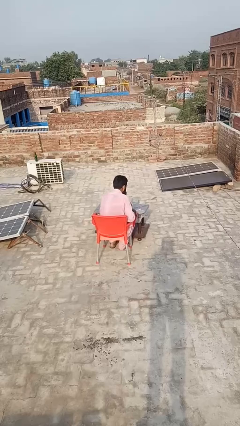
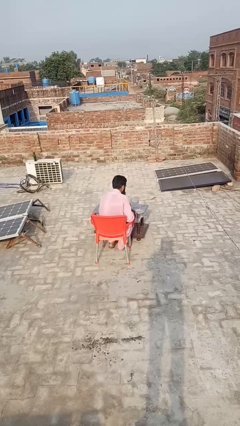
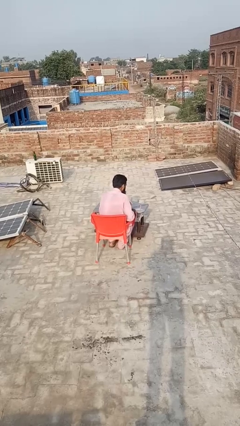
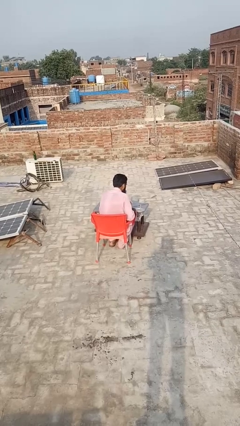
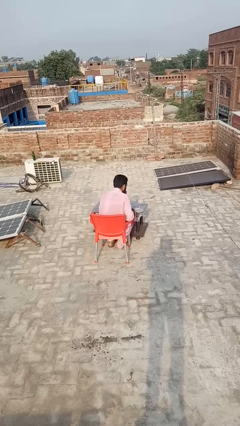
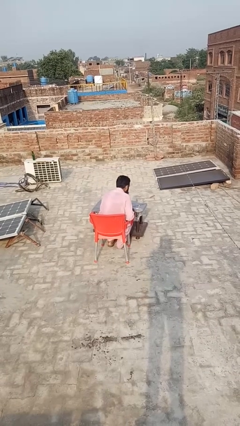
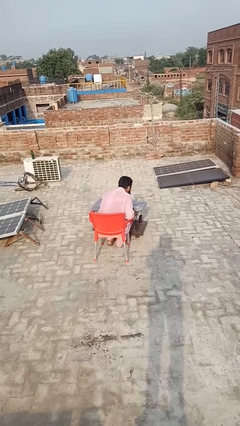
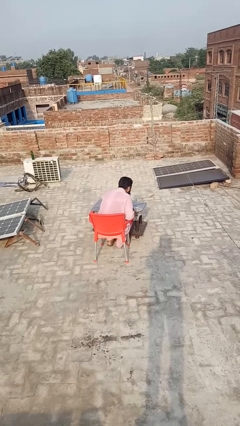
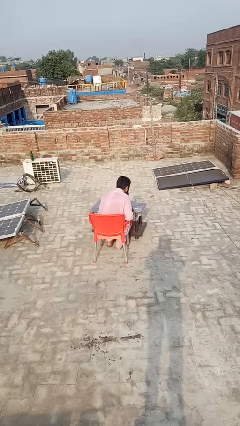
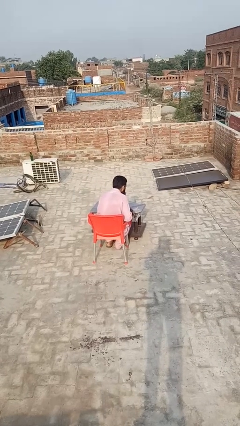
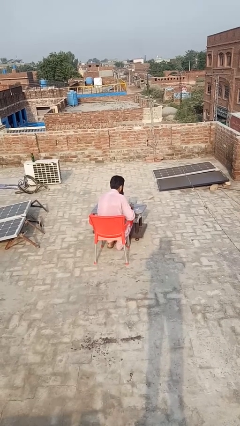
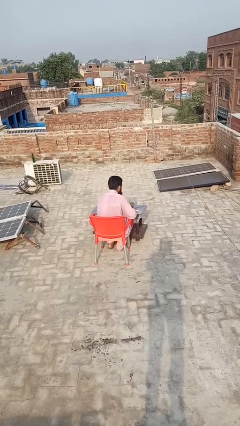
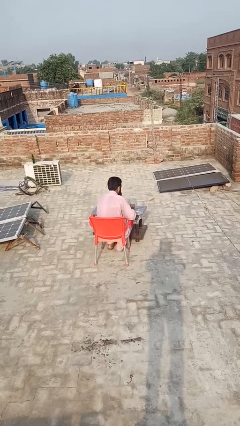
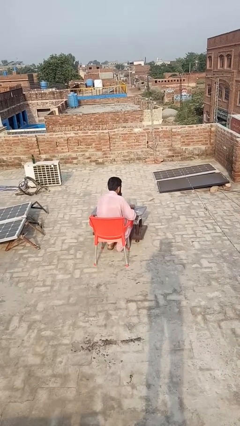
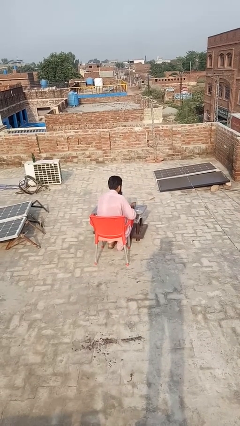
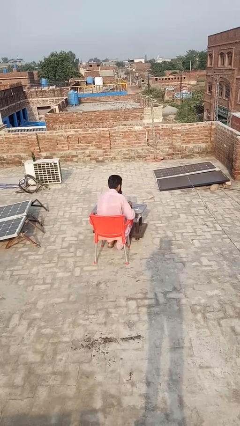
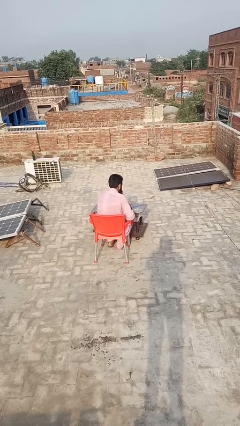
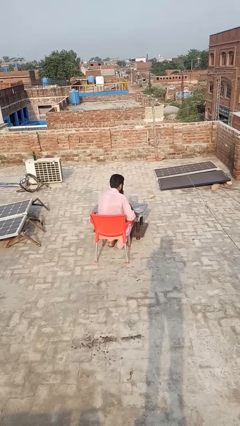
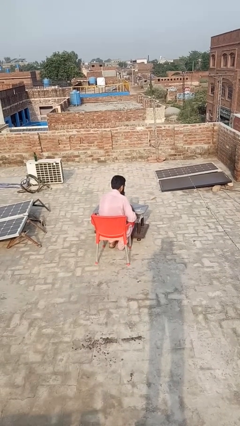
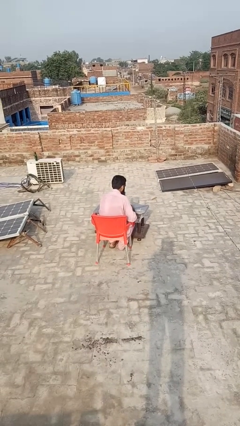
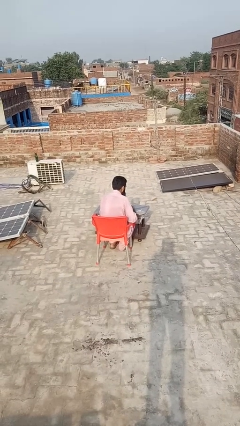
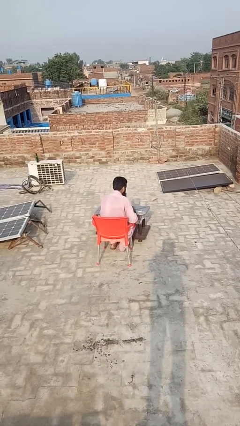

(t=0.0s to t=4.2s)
person extinguishes candle

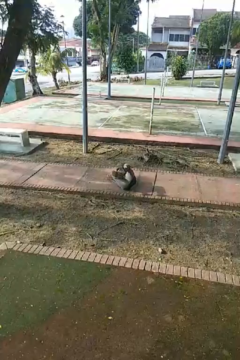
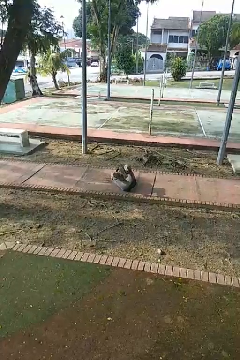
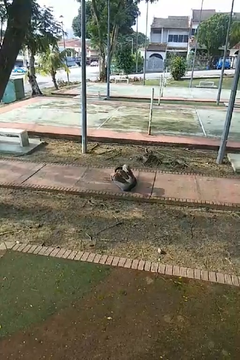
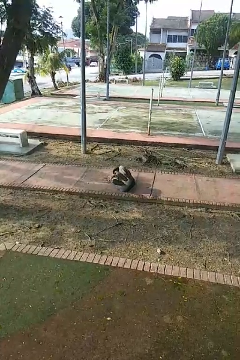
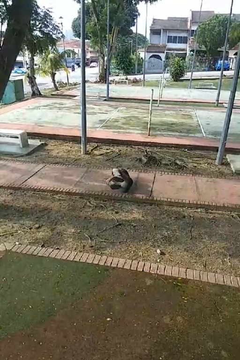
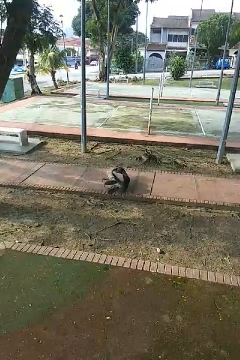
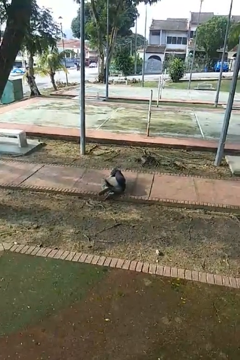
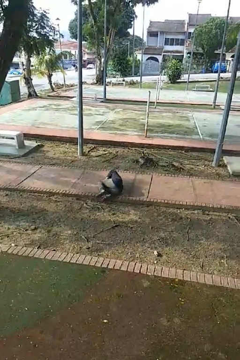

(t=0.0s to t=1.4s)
person lies down on floor

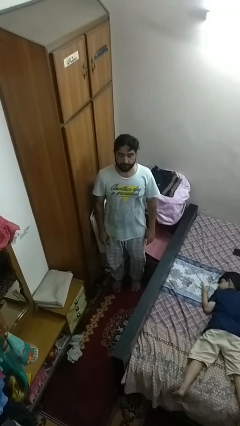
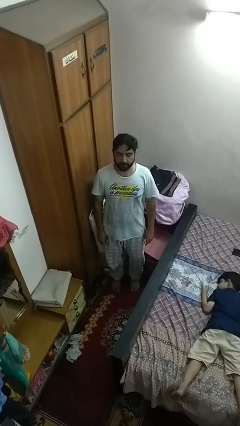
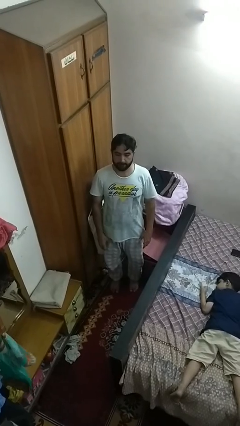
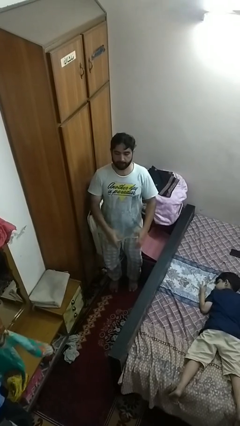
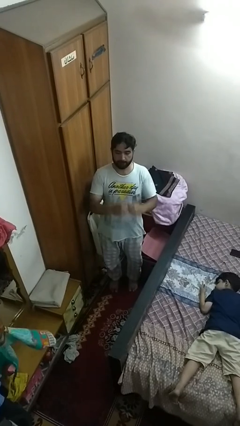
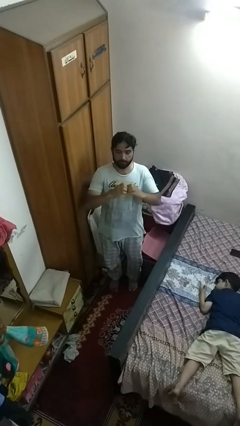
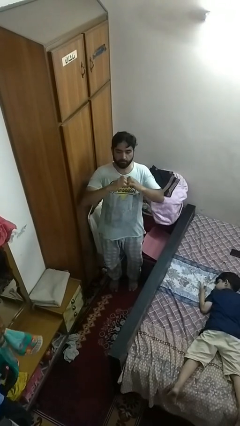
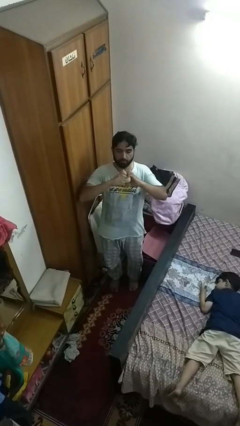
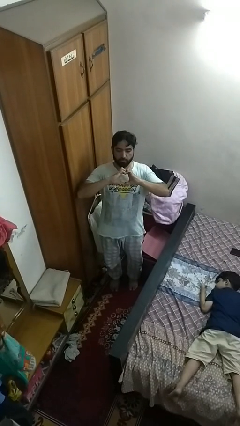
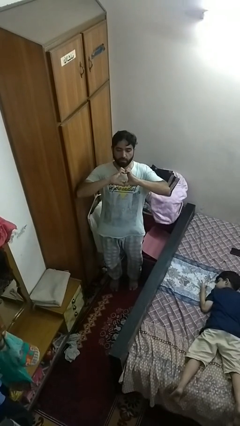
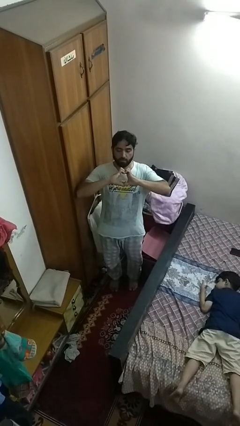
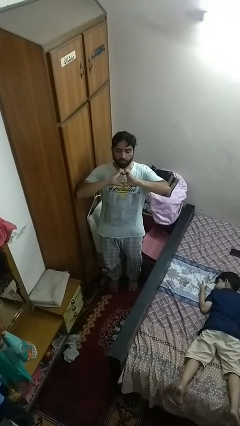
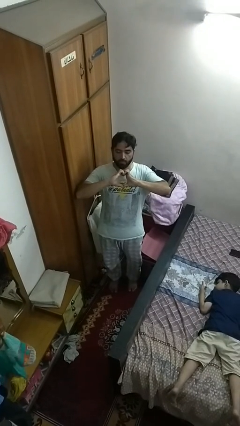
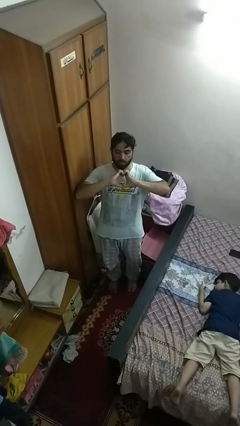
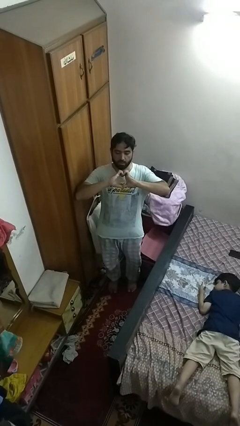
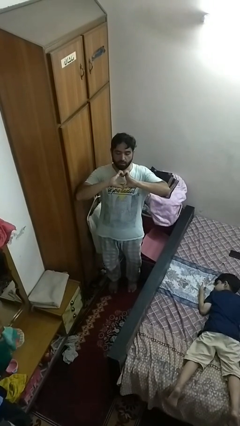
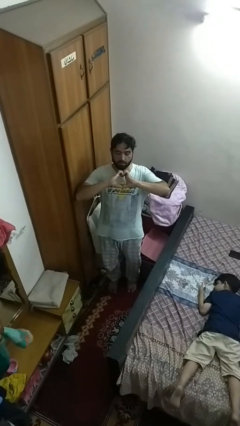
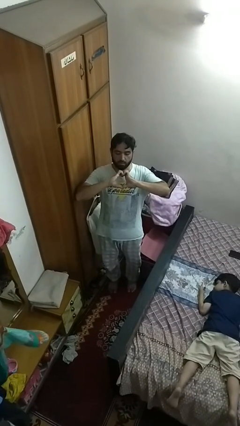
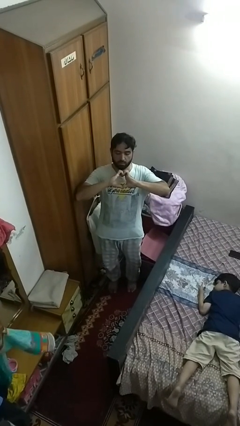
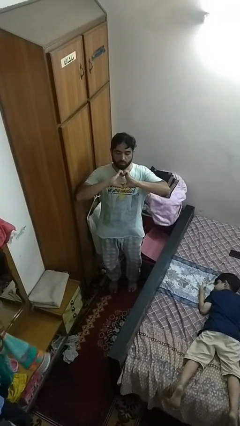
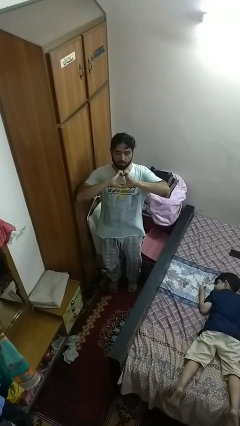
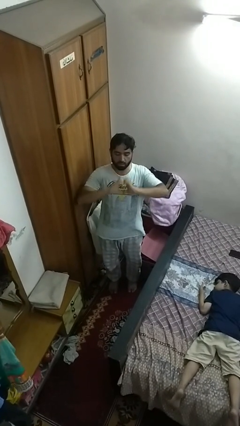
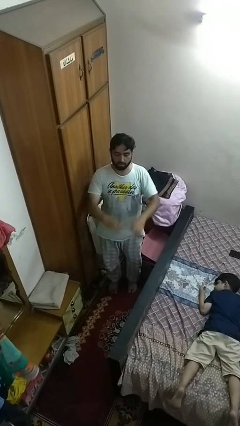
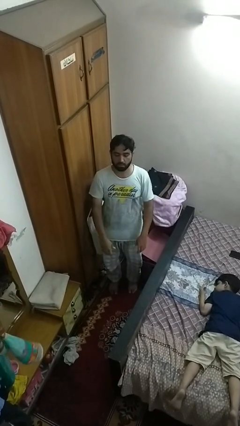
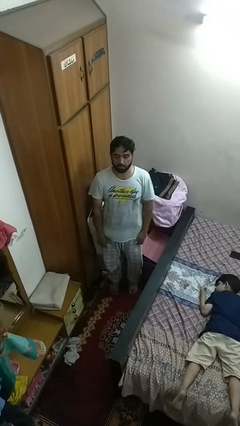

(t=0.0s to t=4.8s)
person gestures heart

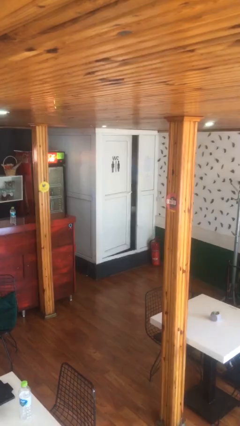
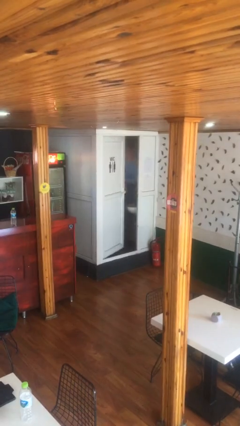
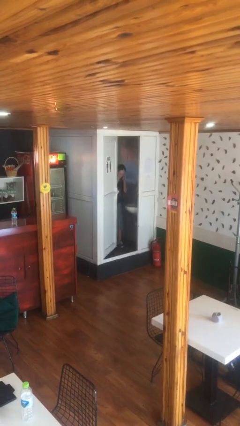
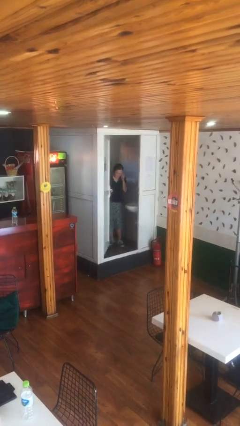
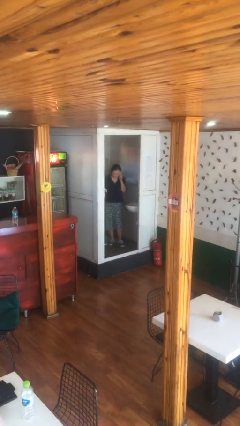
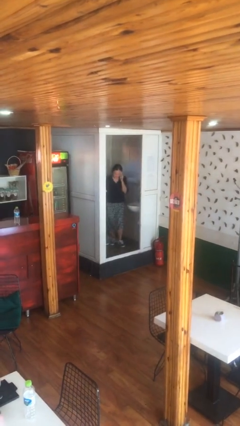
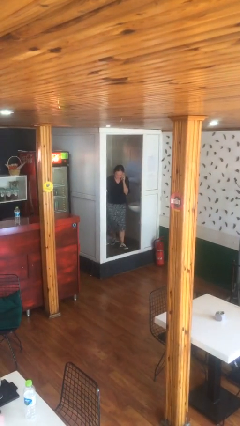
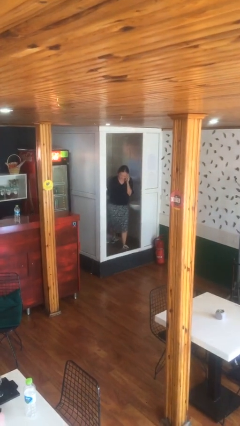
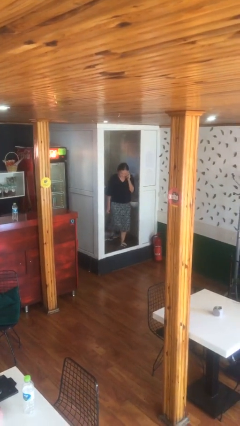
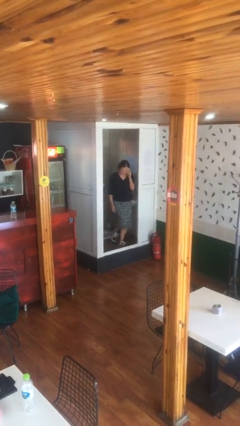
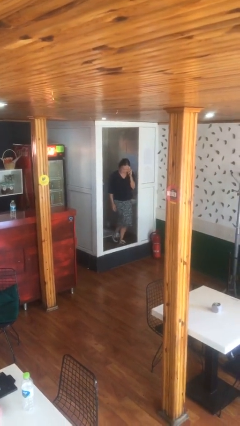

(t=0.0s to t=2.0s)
person opens facility door

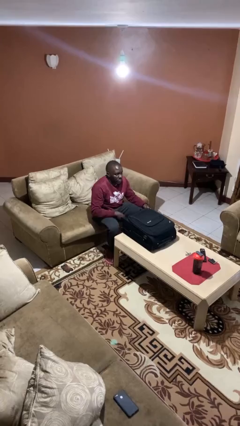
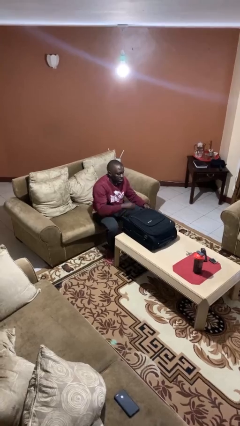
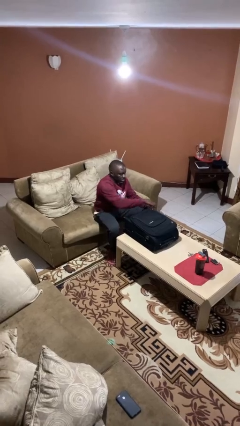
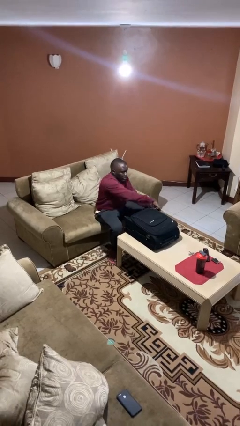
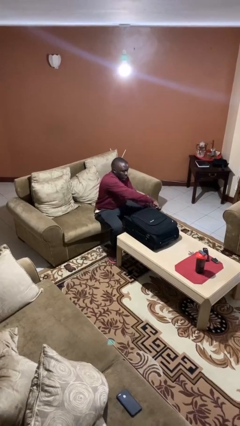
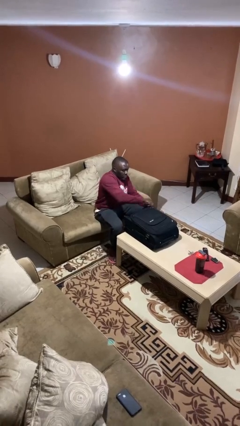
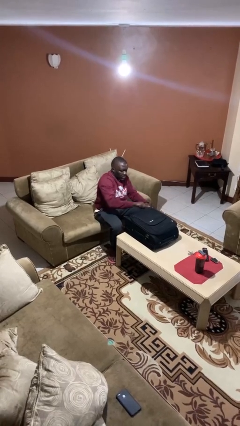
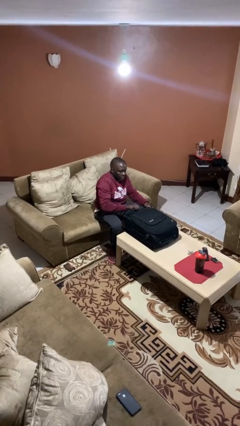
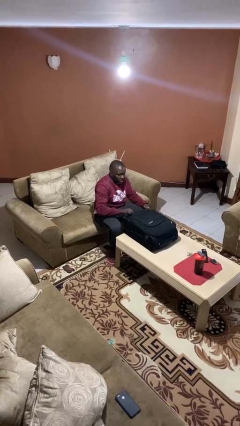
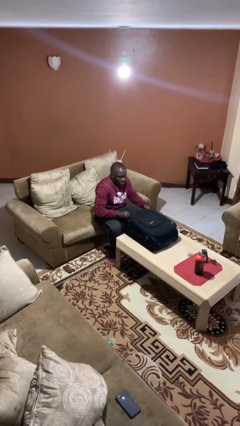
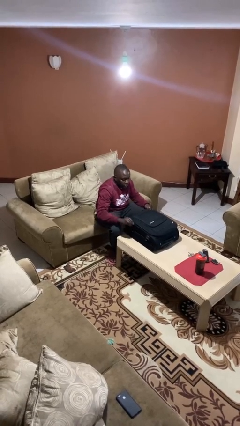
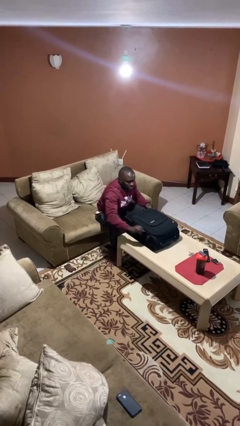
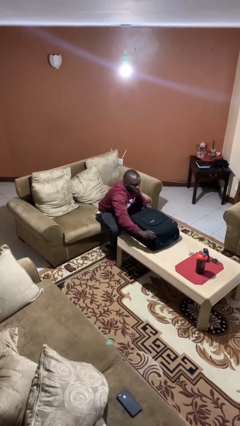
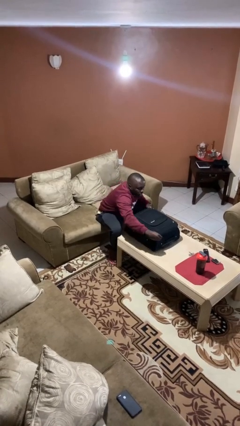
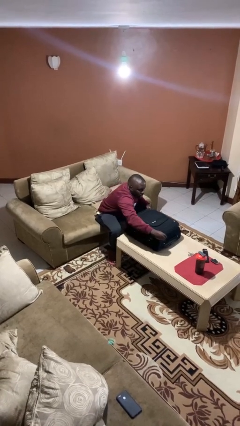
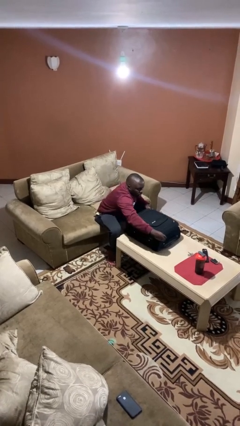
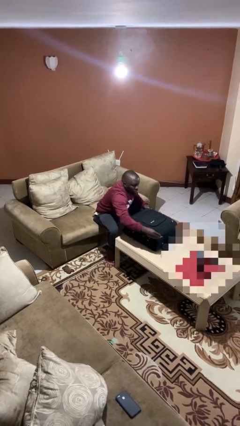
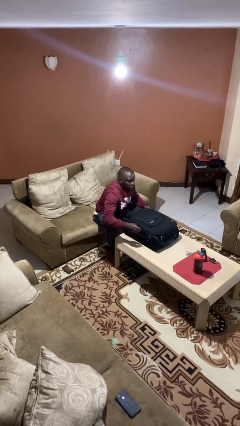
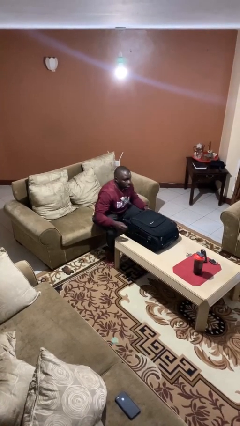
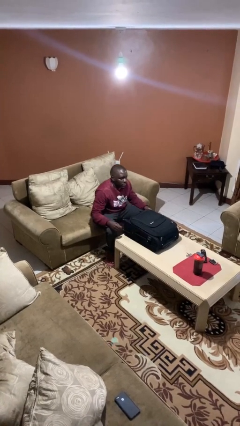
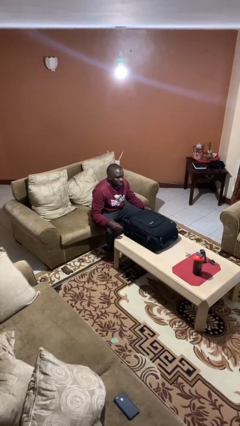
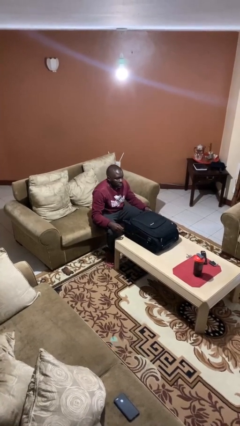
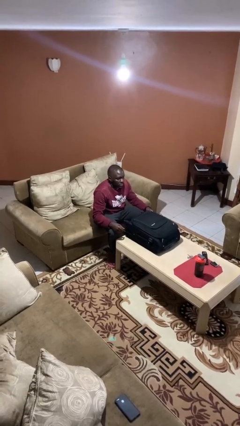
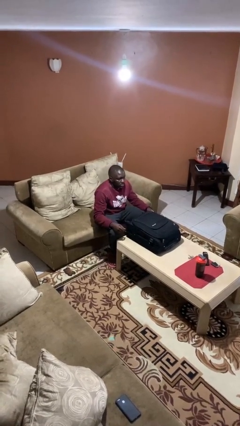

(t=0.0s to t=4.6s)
person closes suitcase

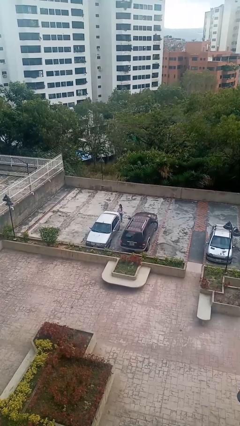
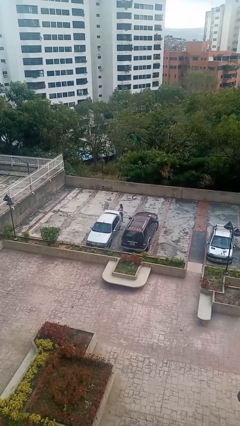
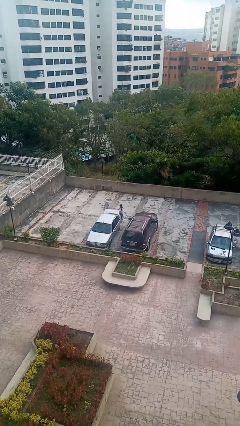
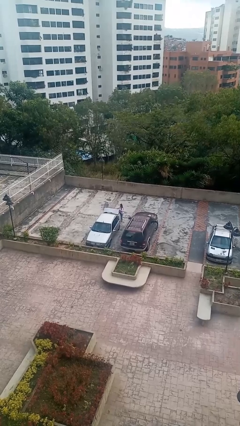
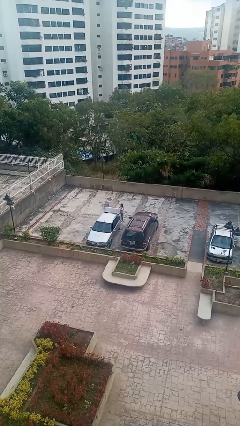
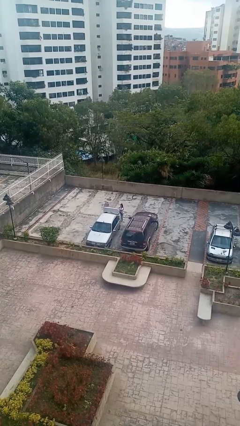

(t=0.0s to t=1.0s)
person opens car trunk
